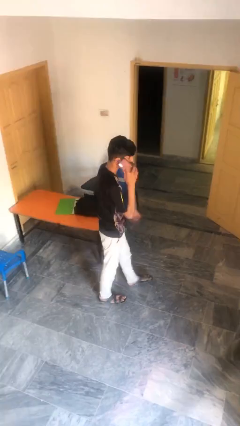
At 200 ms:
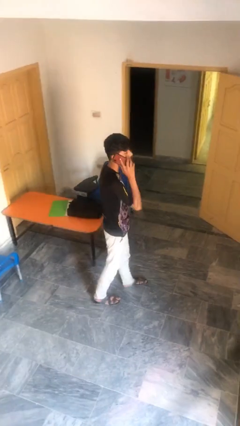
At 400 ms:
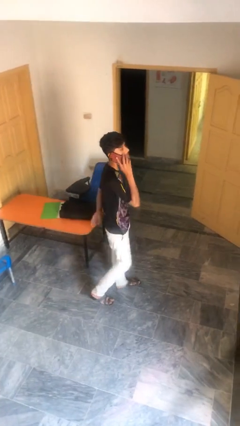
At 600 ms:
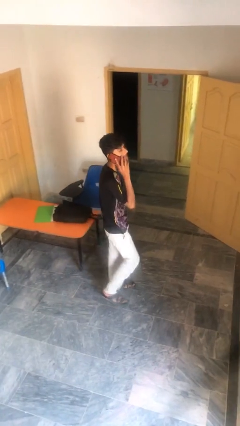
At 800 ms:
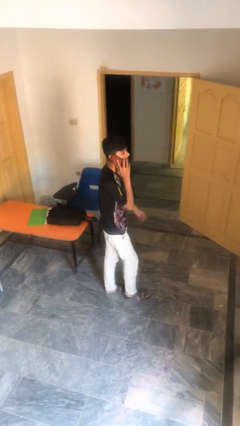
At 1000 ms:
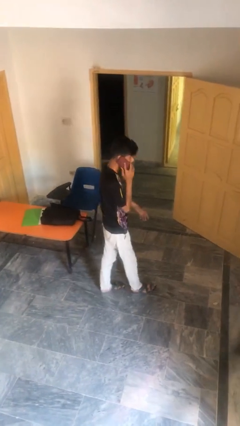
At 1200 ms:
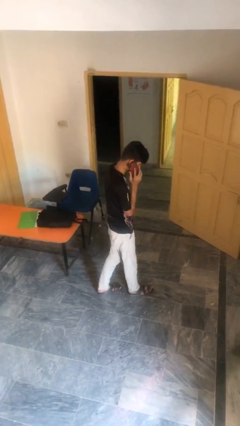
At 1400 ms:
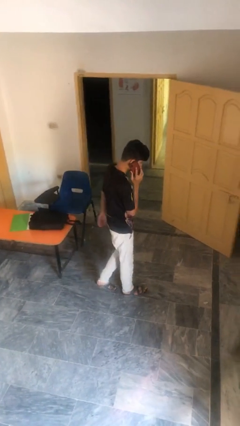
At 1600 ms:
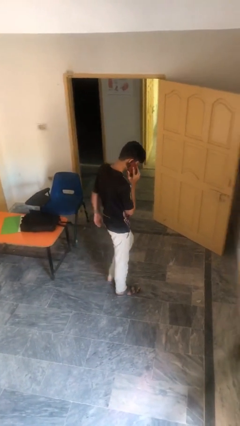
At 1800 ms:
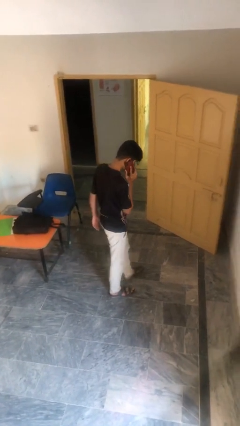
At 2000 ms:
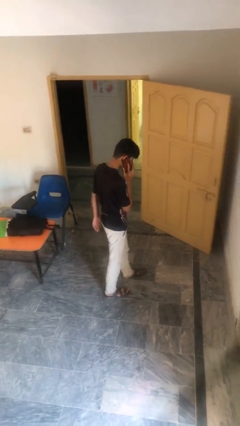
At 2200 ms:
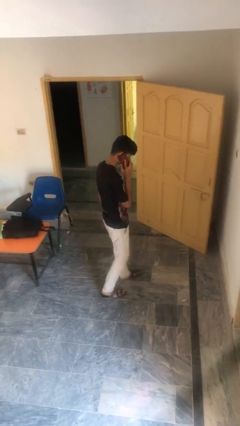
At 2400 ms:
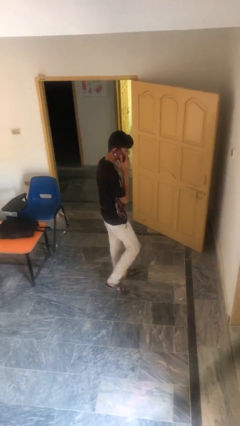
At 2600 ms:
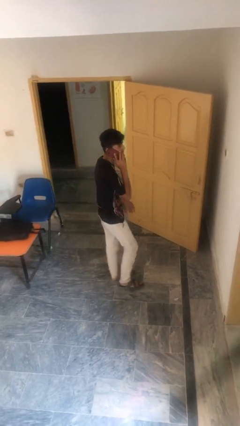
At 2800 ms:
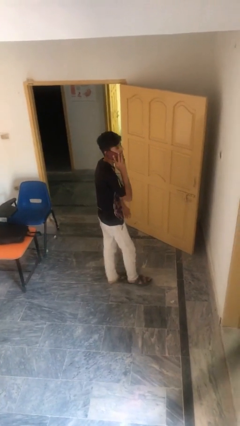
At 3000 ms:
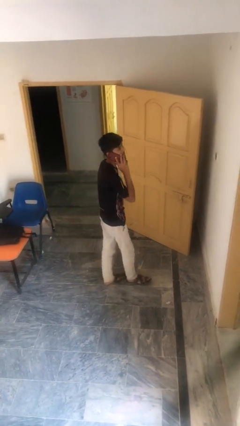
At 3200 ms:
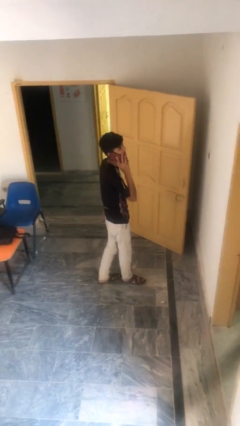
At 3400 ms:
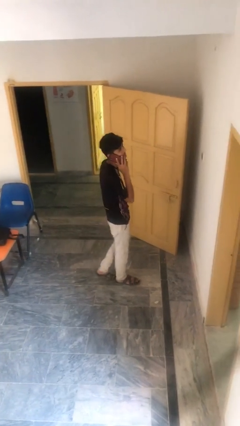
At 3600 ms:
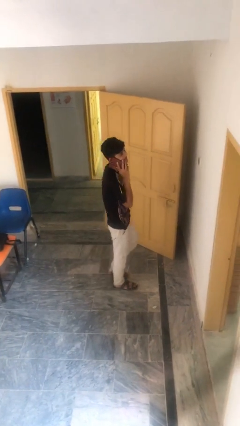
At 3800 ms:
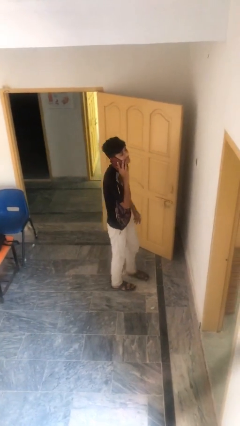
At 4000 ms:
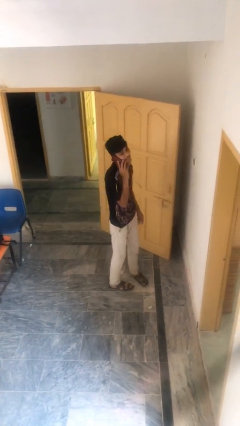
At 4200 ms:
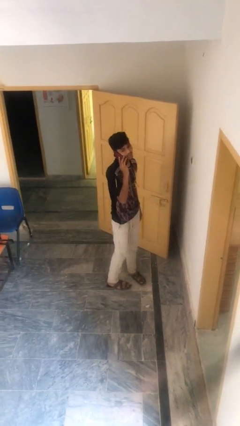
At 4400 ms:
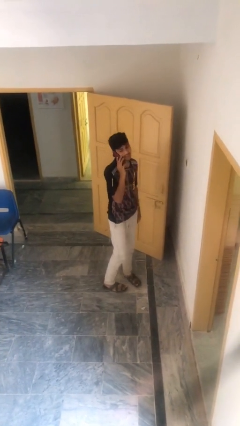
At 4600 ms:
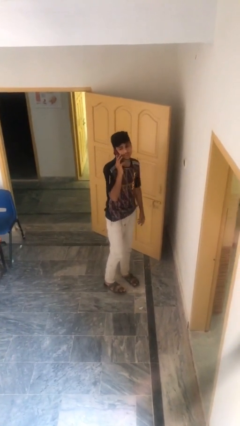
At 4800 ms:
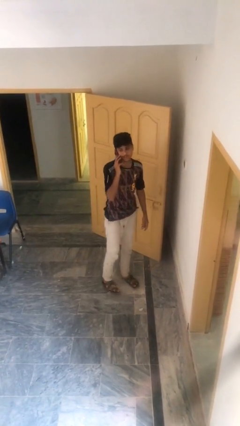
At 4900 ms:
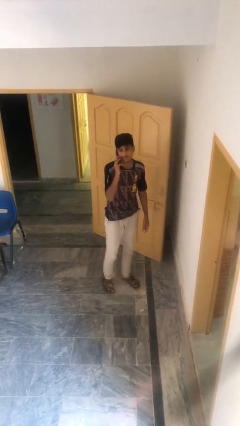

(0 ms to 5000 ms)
person talks on phone

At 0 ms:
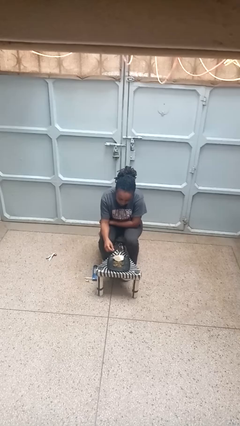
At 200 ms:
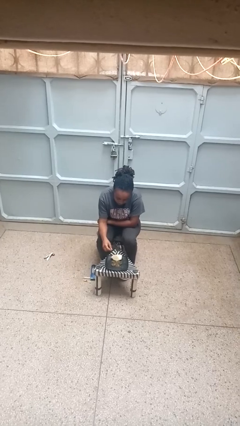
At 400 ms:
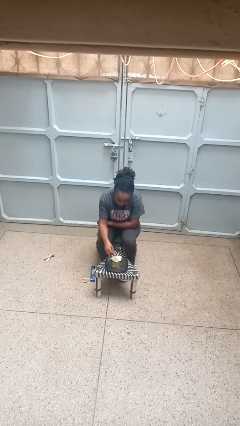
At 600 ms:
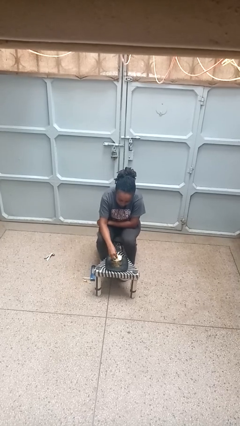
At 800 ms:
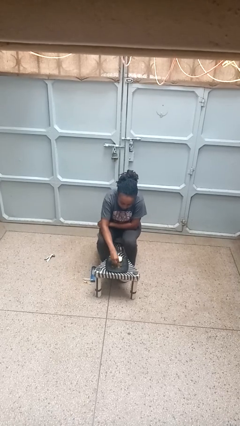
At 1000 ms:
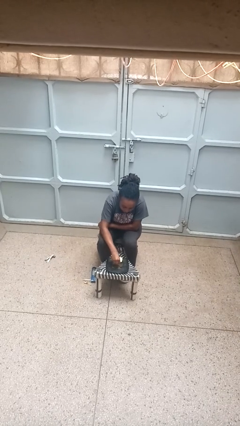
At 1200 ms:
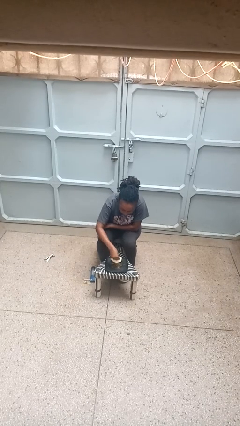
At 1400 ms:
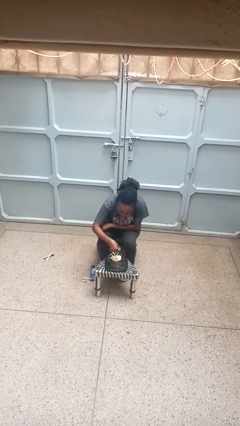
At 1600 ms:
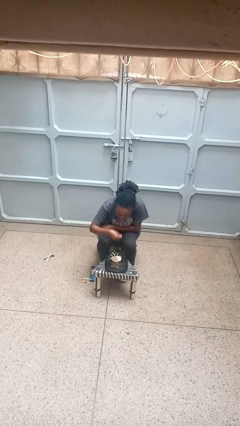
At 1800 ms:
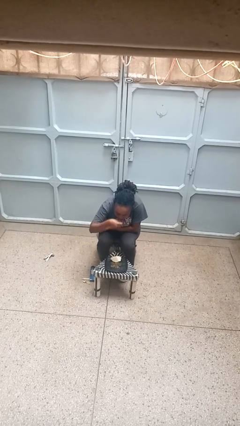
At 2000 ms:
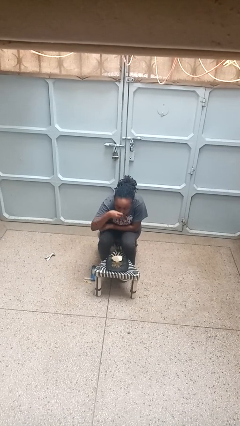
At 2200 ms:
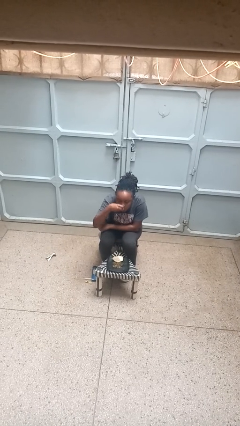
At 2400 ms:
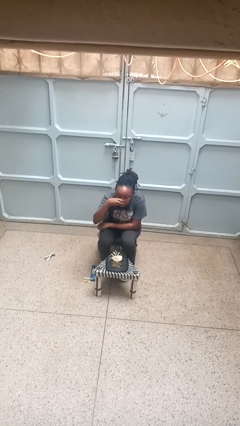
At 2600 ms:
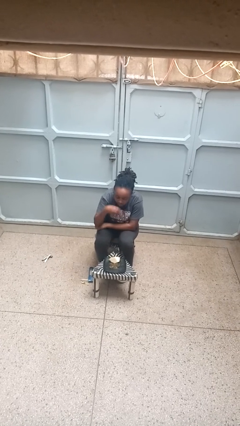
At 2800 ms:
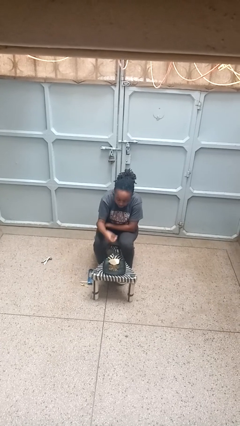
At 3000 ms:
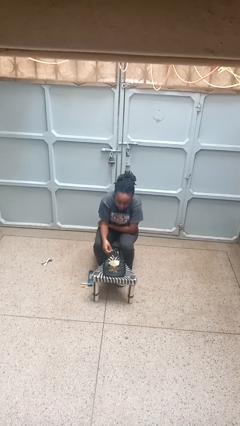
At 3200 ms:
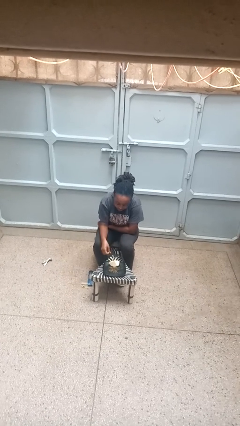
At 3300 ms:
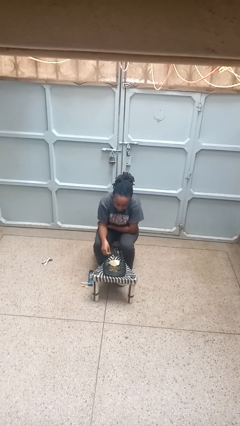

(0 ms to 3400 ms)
person eats with hands

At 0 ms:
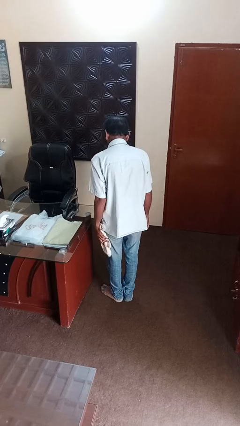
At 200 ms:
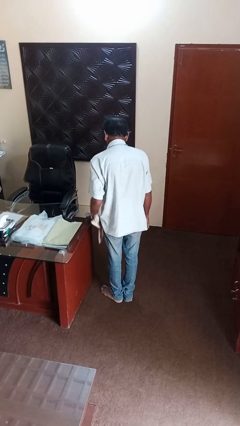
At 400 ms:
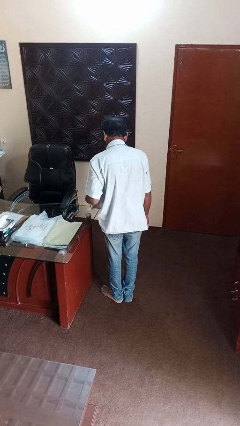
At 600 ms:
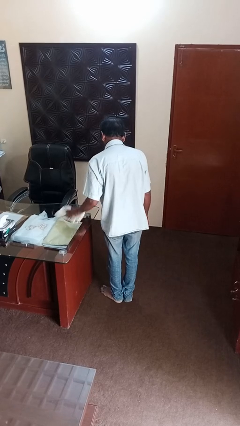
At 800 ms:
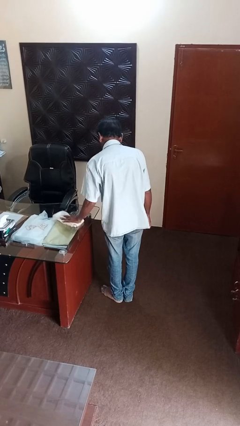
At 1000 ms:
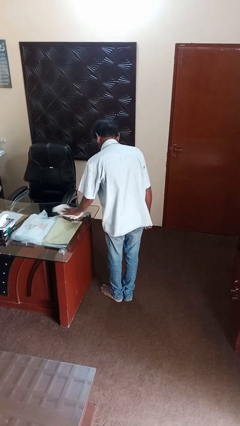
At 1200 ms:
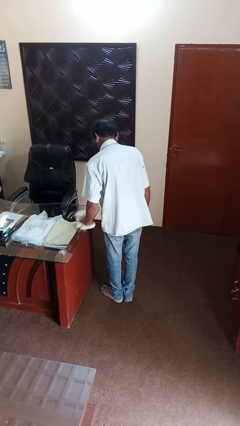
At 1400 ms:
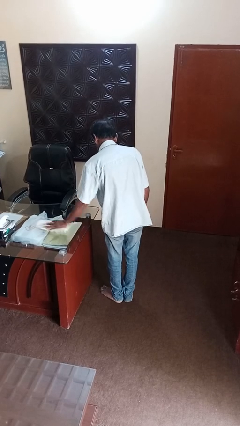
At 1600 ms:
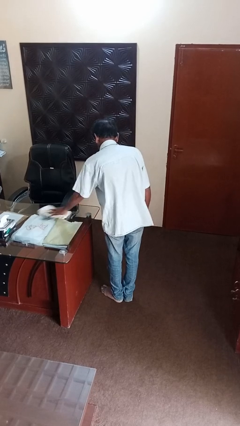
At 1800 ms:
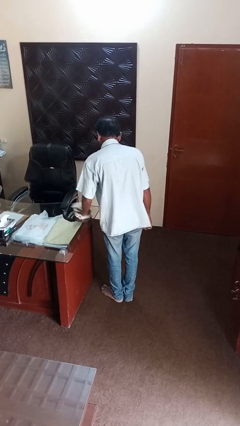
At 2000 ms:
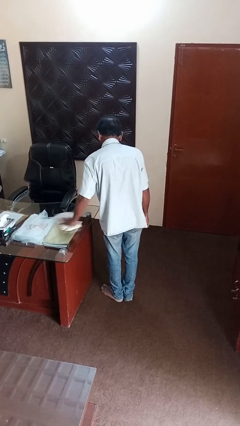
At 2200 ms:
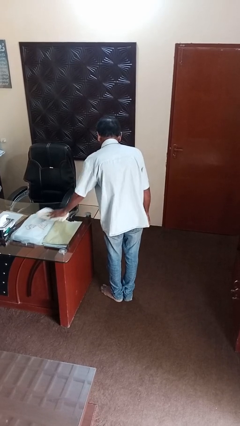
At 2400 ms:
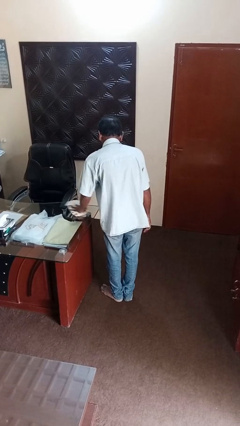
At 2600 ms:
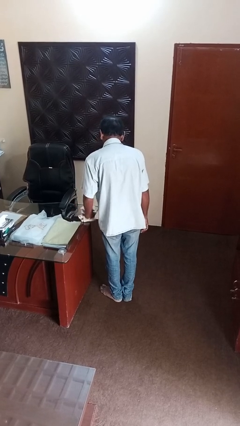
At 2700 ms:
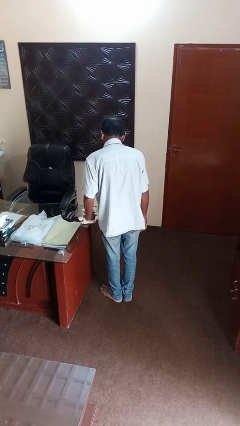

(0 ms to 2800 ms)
person cleans table with rag

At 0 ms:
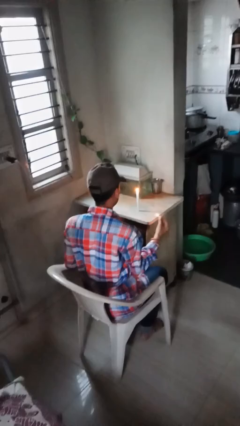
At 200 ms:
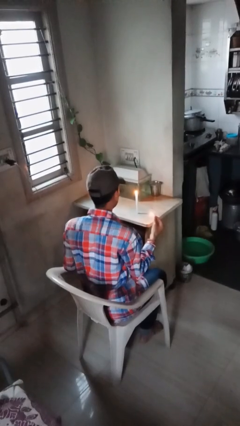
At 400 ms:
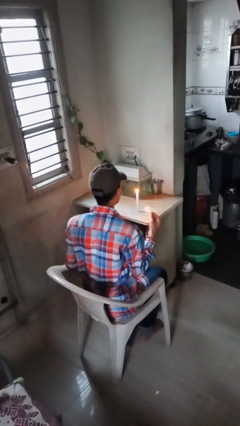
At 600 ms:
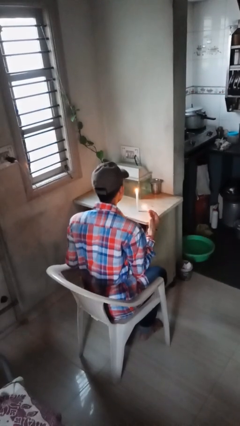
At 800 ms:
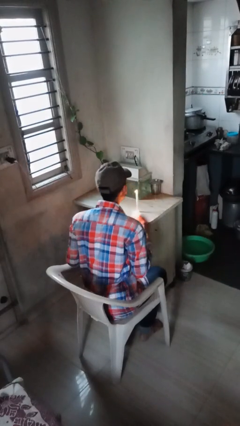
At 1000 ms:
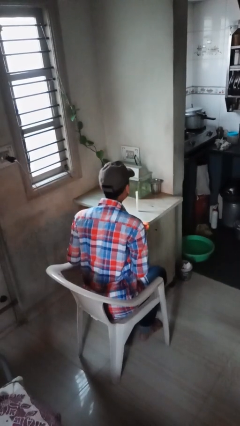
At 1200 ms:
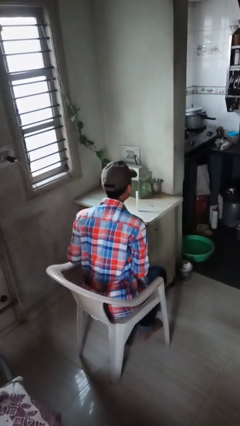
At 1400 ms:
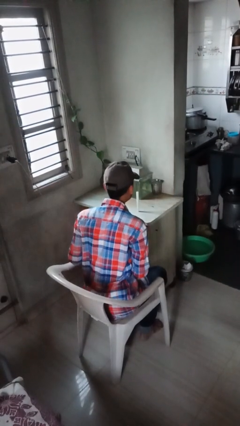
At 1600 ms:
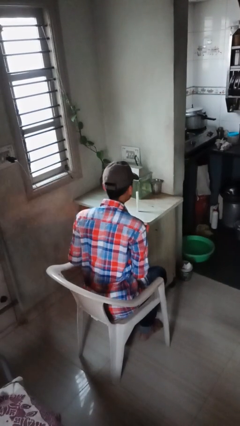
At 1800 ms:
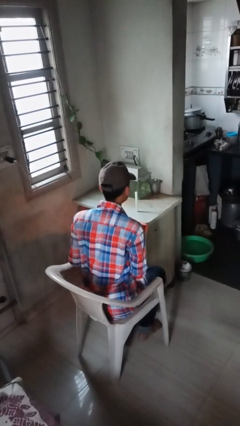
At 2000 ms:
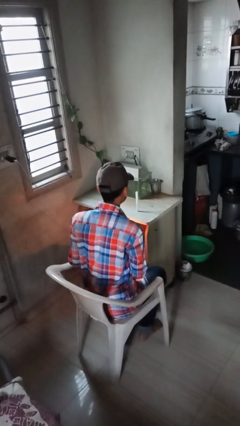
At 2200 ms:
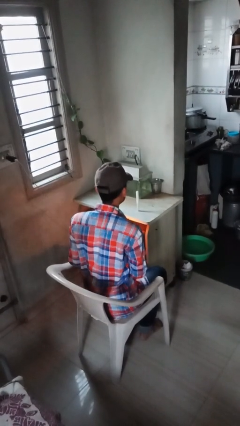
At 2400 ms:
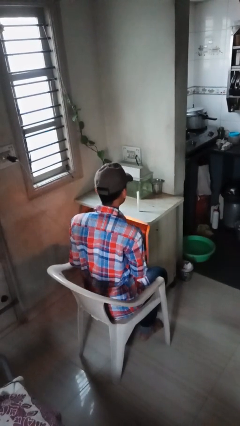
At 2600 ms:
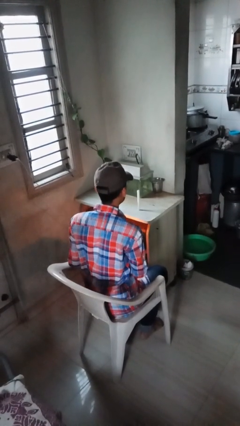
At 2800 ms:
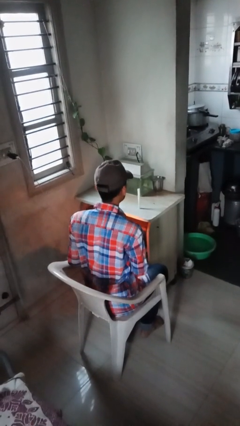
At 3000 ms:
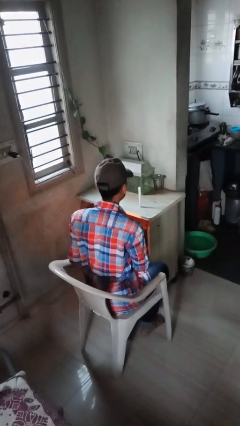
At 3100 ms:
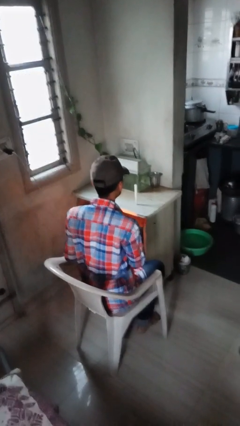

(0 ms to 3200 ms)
person extinguishes candle

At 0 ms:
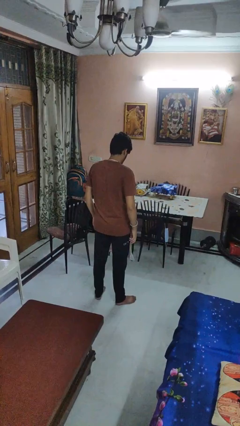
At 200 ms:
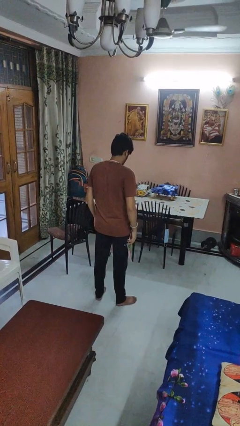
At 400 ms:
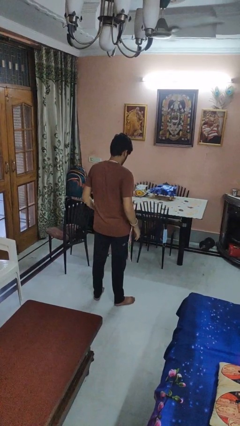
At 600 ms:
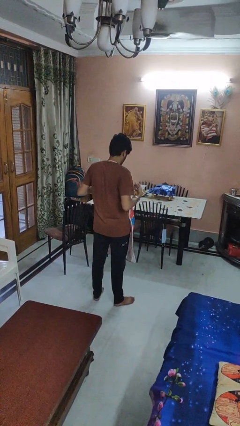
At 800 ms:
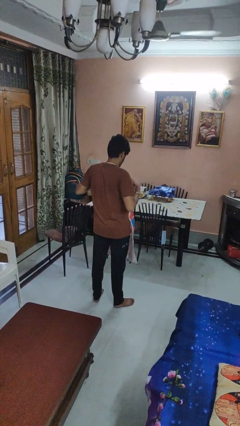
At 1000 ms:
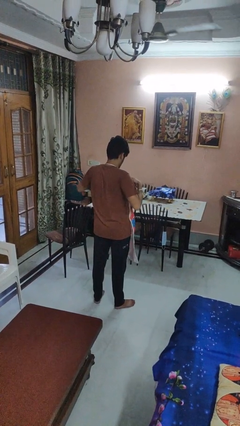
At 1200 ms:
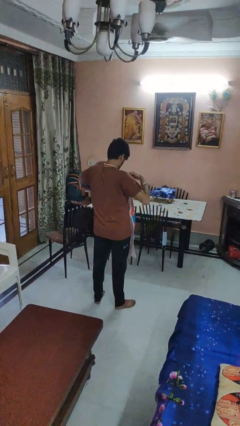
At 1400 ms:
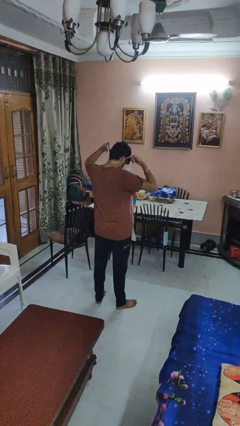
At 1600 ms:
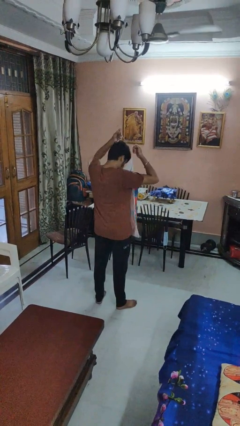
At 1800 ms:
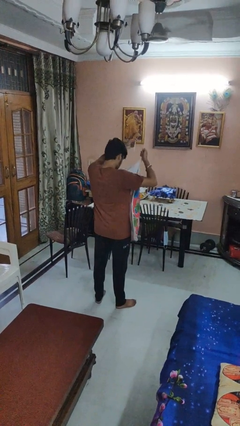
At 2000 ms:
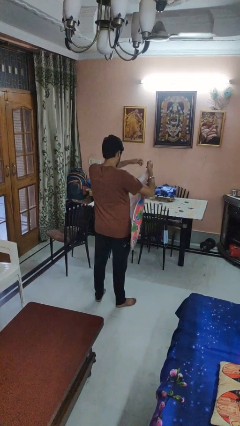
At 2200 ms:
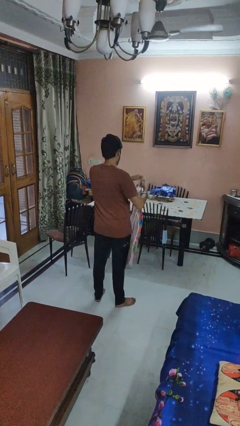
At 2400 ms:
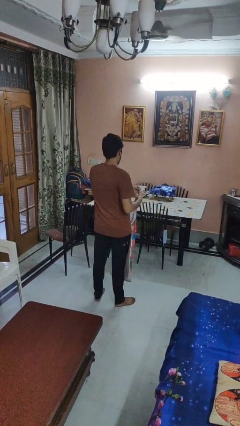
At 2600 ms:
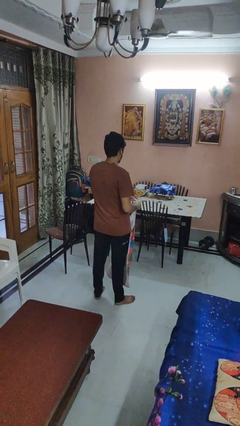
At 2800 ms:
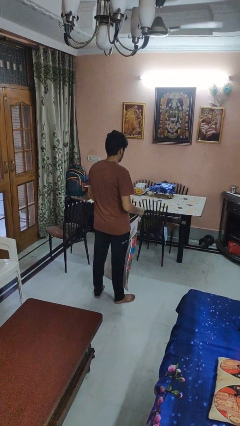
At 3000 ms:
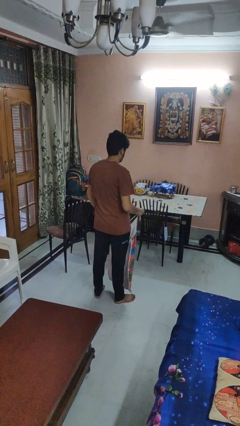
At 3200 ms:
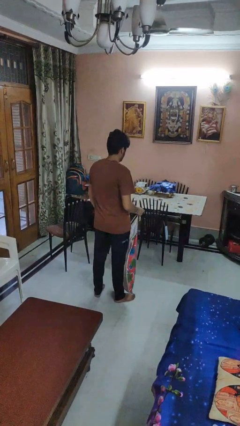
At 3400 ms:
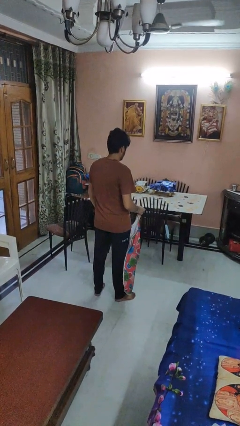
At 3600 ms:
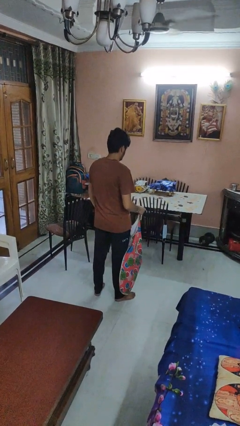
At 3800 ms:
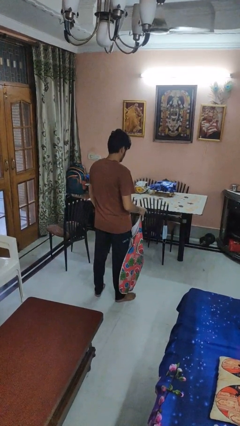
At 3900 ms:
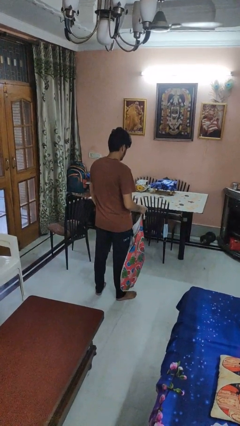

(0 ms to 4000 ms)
person takes off apron
